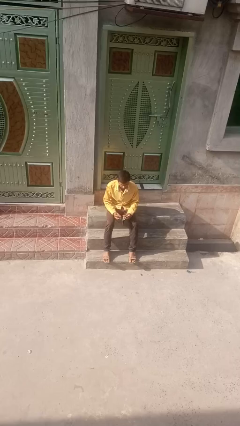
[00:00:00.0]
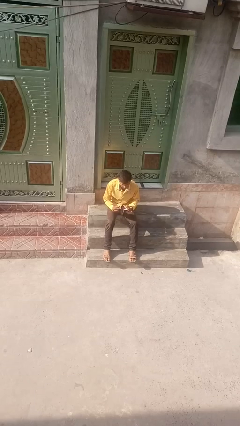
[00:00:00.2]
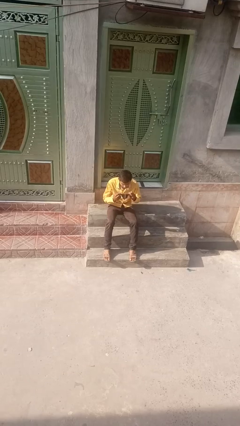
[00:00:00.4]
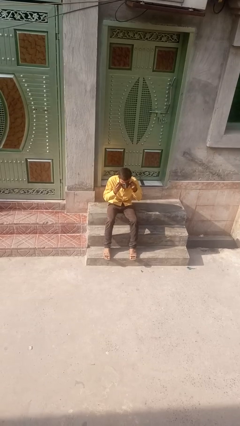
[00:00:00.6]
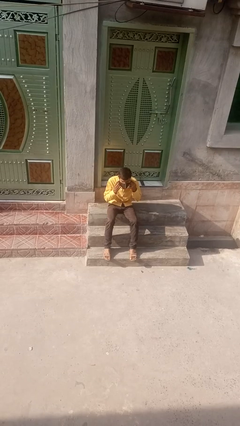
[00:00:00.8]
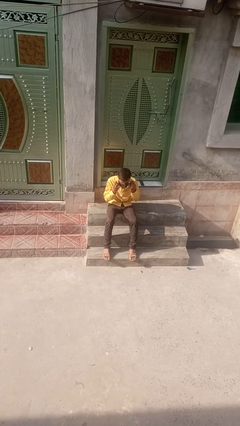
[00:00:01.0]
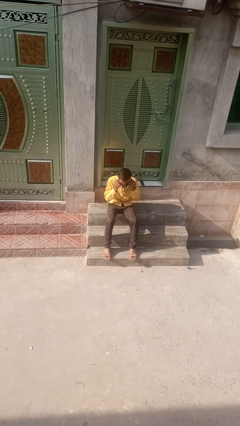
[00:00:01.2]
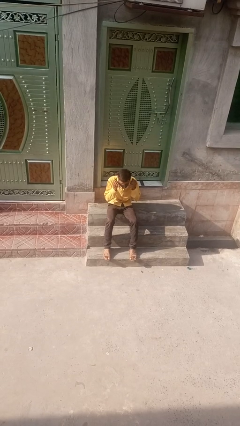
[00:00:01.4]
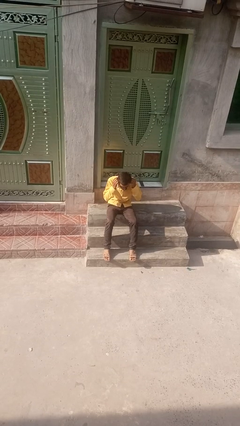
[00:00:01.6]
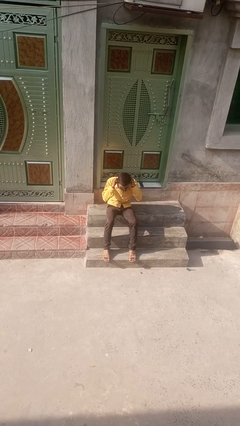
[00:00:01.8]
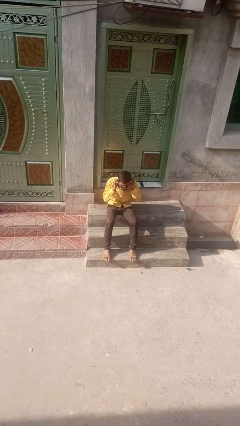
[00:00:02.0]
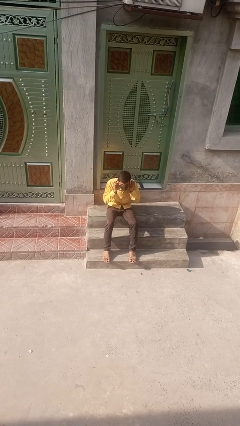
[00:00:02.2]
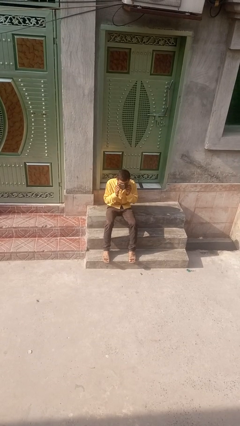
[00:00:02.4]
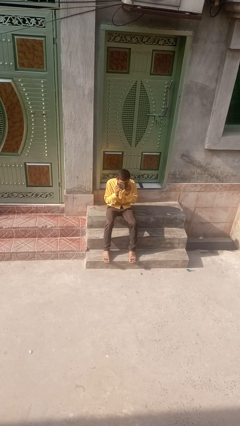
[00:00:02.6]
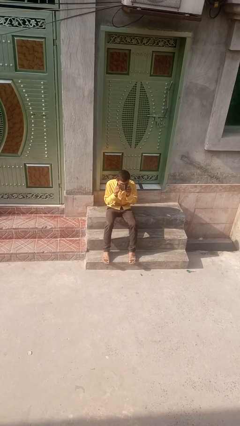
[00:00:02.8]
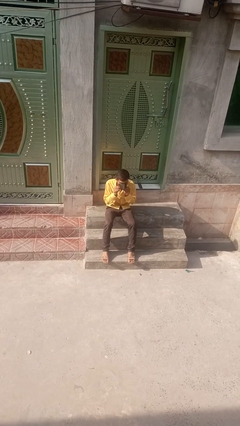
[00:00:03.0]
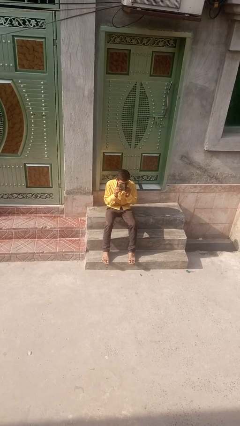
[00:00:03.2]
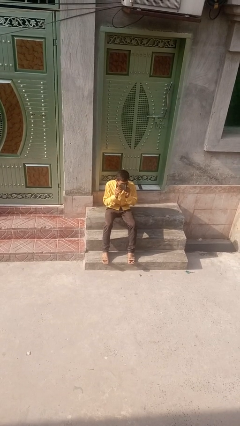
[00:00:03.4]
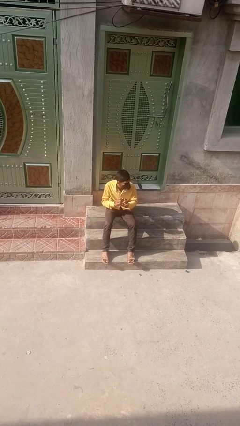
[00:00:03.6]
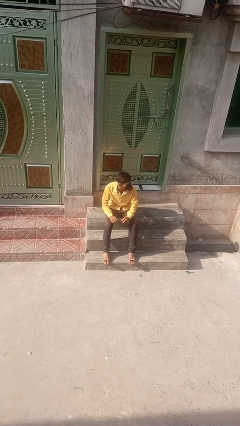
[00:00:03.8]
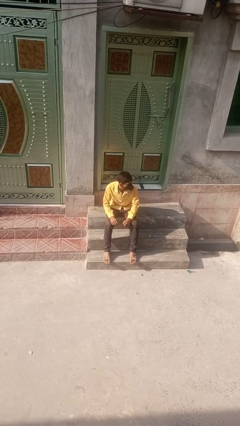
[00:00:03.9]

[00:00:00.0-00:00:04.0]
person puts on facemask

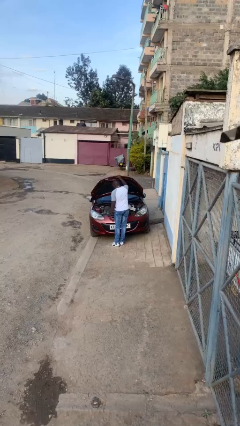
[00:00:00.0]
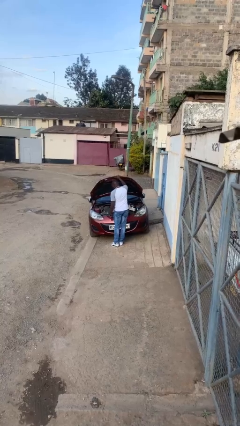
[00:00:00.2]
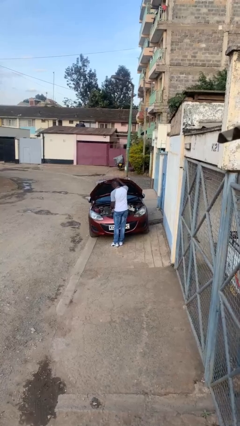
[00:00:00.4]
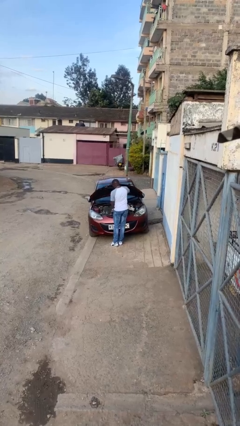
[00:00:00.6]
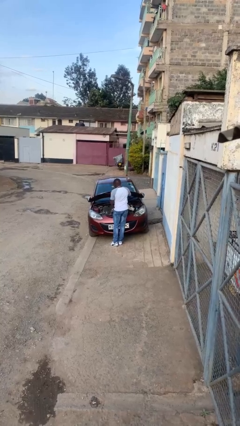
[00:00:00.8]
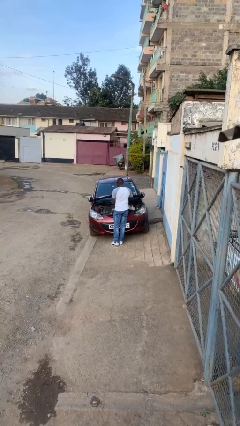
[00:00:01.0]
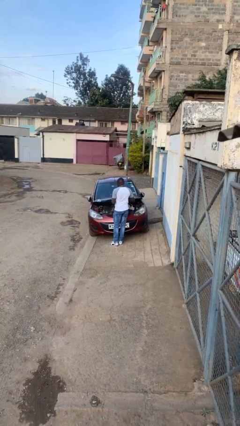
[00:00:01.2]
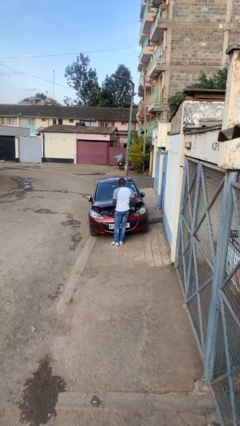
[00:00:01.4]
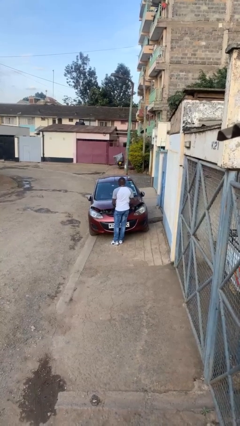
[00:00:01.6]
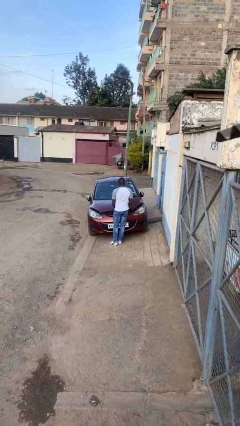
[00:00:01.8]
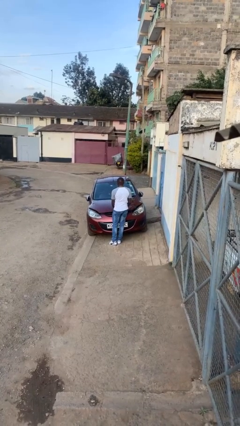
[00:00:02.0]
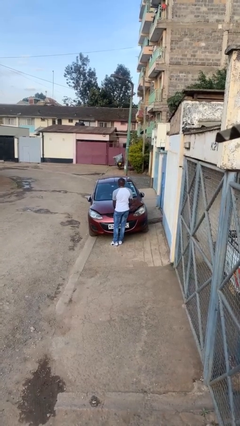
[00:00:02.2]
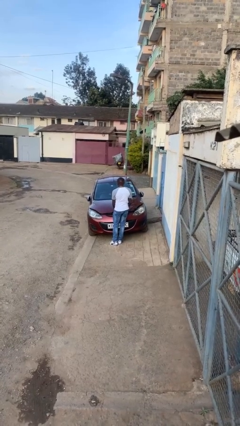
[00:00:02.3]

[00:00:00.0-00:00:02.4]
person closes car hood

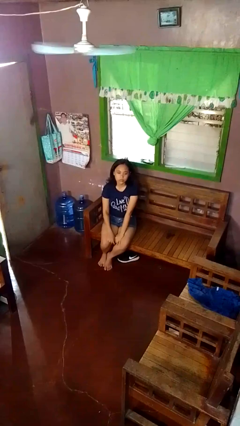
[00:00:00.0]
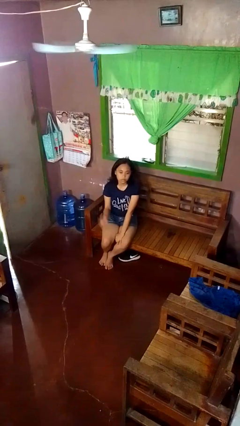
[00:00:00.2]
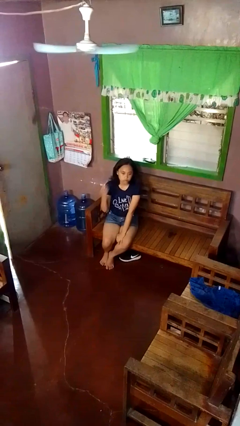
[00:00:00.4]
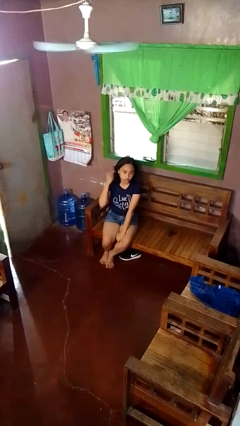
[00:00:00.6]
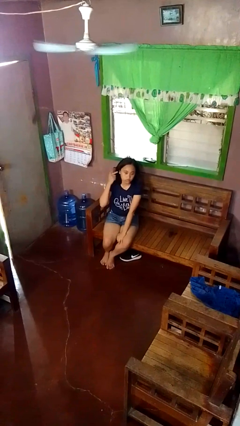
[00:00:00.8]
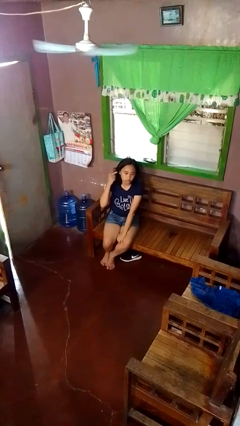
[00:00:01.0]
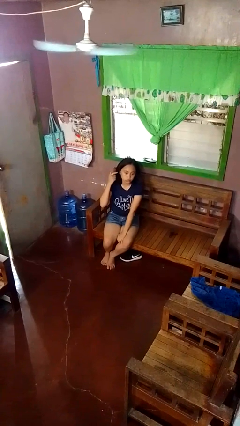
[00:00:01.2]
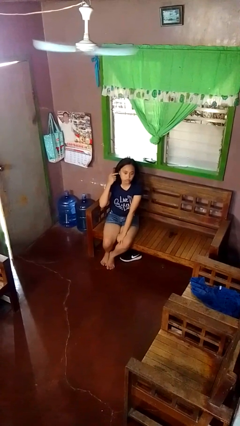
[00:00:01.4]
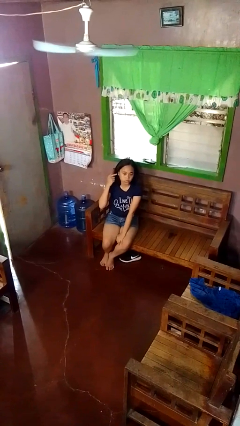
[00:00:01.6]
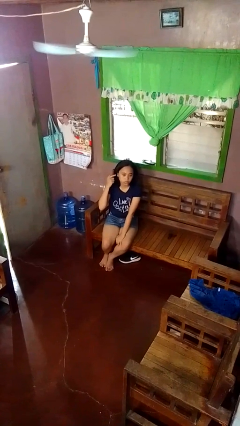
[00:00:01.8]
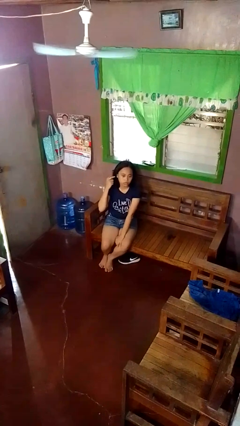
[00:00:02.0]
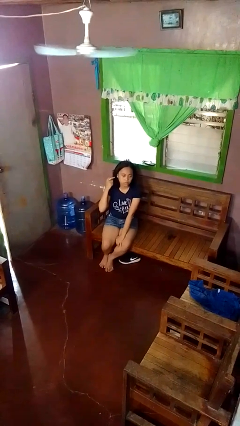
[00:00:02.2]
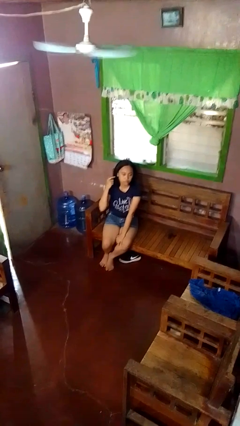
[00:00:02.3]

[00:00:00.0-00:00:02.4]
person gestures listen closely

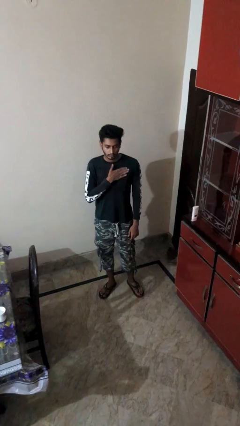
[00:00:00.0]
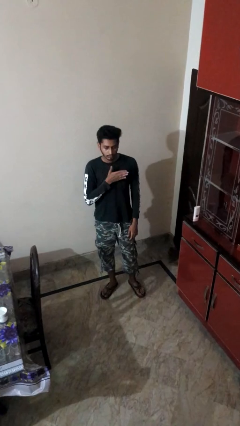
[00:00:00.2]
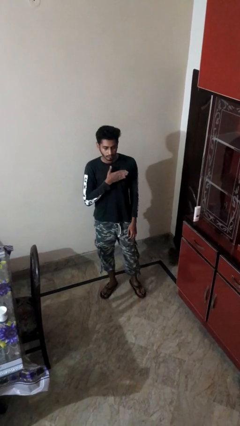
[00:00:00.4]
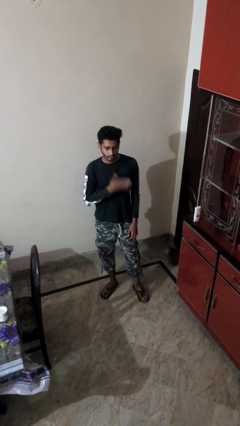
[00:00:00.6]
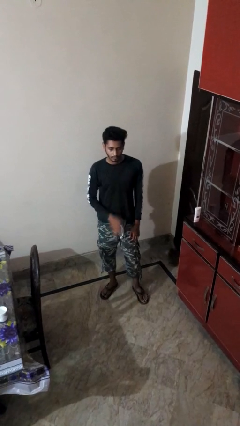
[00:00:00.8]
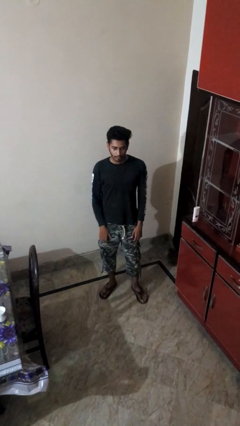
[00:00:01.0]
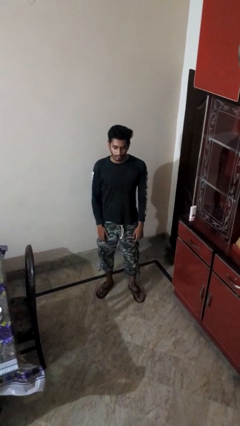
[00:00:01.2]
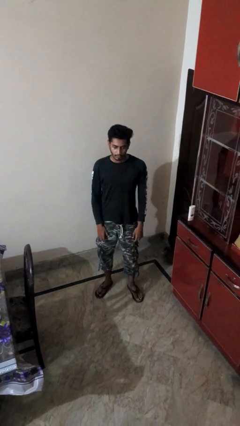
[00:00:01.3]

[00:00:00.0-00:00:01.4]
person drums on chest

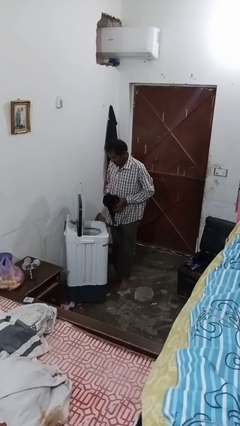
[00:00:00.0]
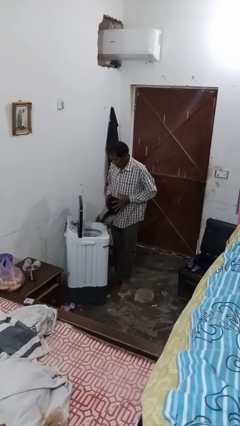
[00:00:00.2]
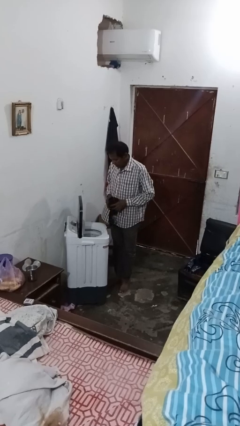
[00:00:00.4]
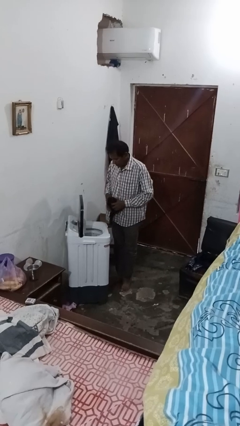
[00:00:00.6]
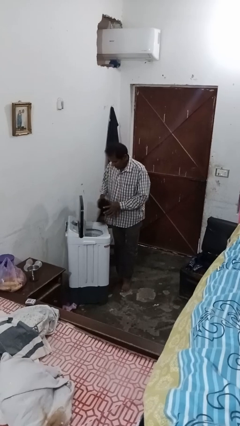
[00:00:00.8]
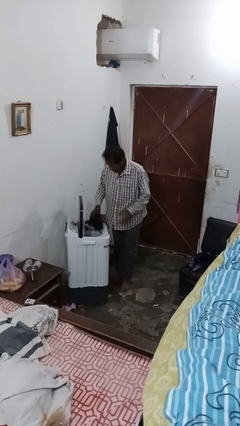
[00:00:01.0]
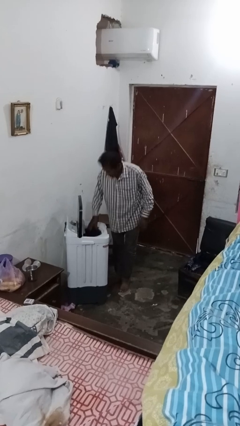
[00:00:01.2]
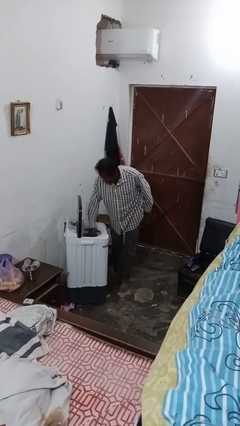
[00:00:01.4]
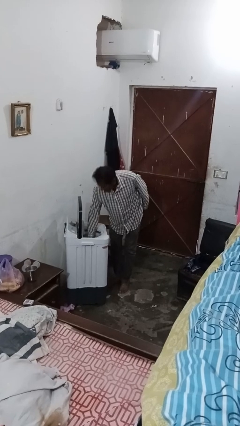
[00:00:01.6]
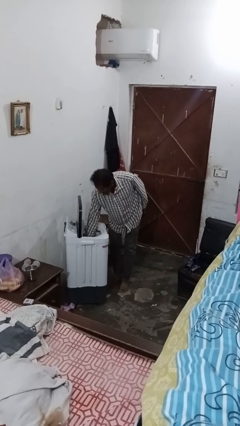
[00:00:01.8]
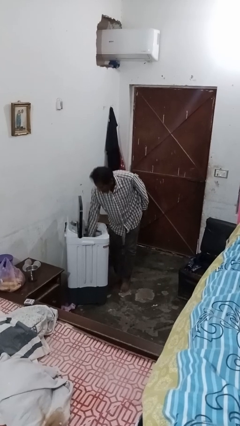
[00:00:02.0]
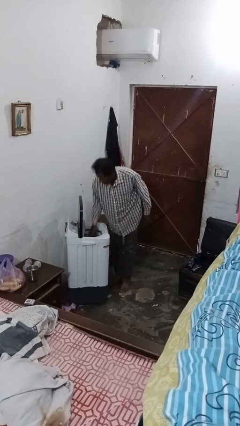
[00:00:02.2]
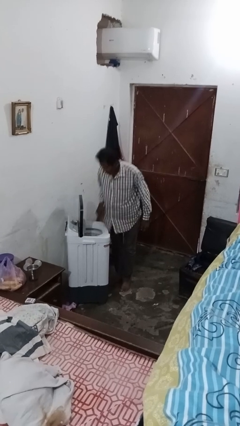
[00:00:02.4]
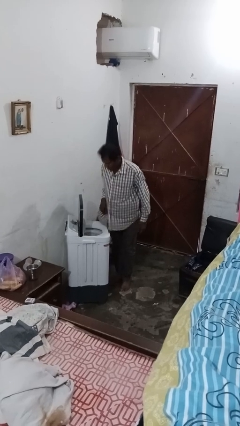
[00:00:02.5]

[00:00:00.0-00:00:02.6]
person loads clotheswasher

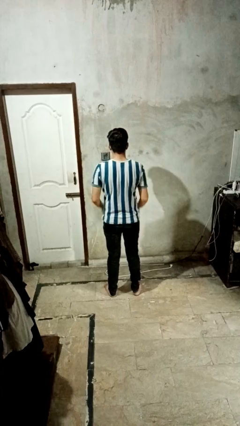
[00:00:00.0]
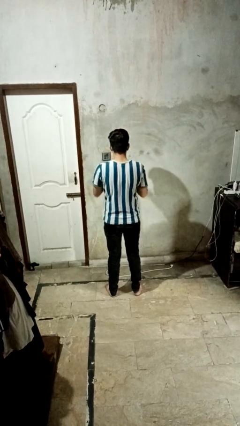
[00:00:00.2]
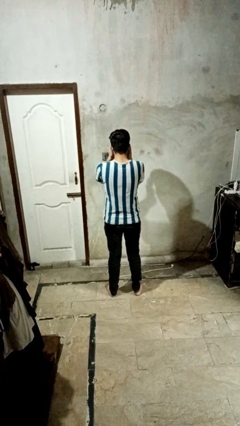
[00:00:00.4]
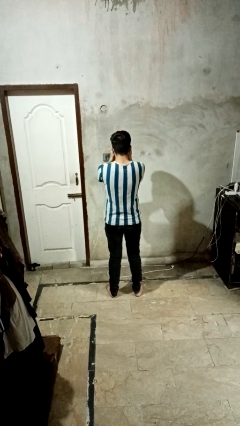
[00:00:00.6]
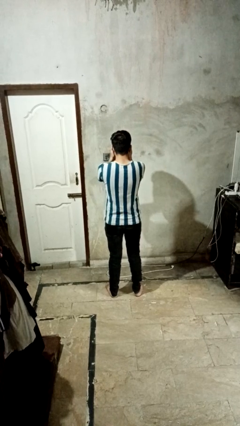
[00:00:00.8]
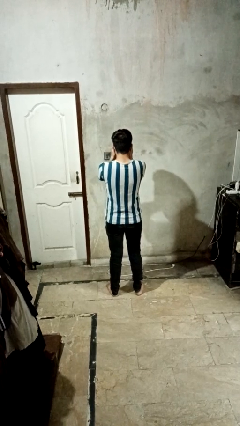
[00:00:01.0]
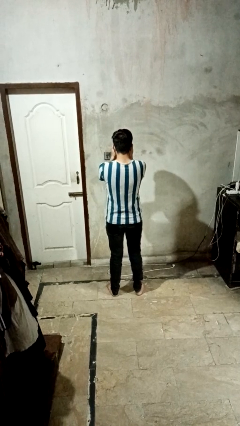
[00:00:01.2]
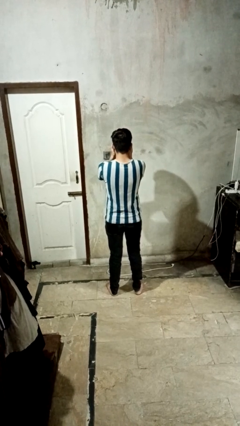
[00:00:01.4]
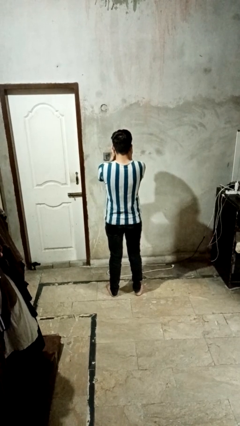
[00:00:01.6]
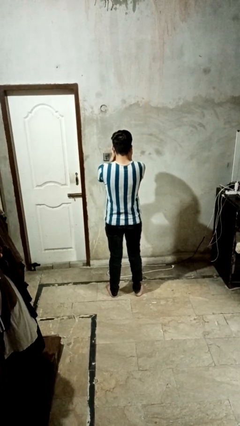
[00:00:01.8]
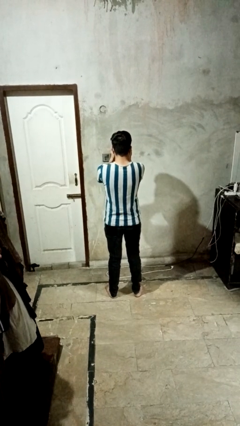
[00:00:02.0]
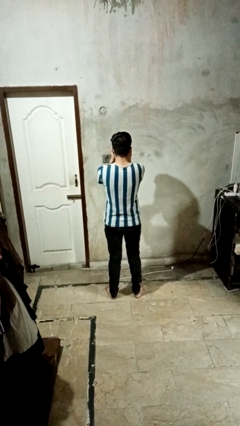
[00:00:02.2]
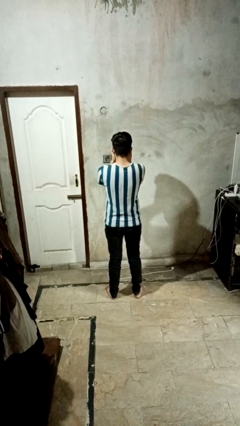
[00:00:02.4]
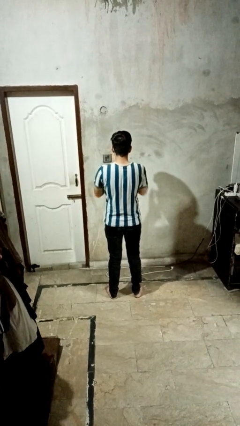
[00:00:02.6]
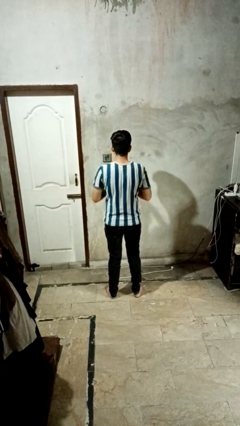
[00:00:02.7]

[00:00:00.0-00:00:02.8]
person covers face with hands

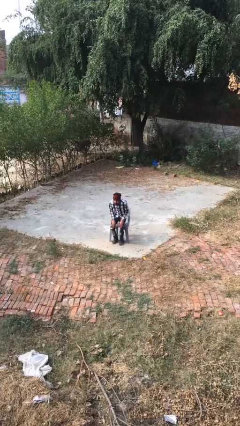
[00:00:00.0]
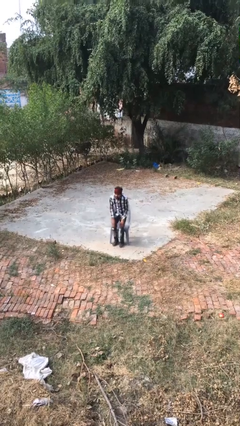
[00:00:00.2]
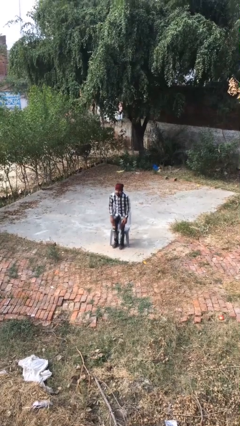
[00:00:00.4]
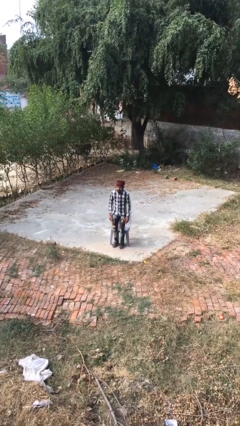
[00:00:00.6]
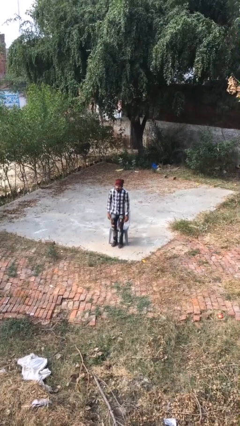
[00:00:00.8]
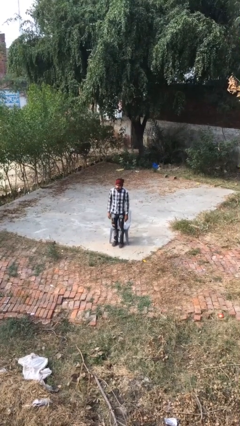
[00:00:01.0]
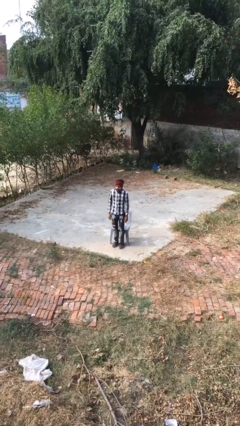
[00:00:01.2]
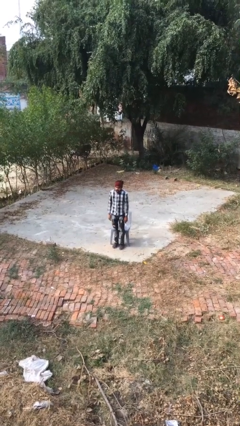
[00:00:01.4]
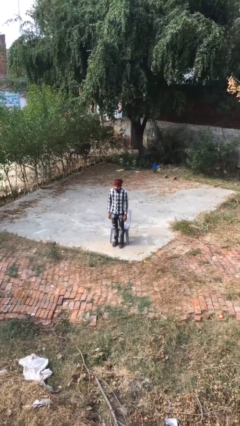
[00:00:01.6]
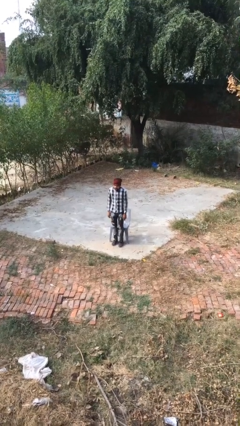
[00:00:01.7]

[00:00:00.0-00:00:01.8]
person stands up
